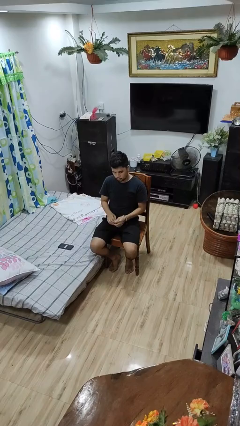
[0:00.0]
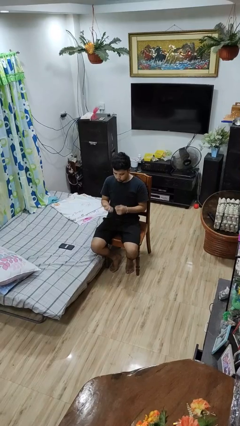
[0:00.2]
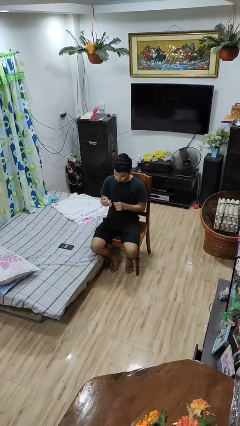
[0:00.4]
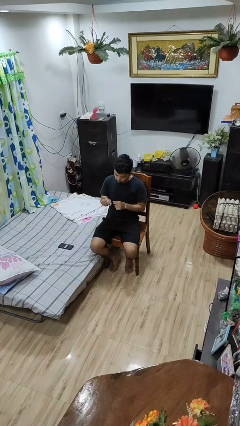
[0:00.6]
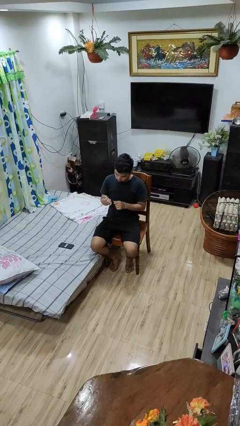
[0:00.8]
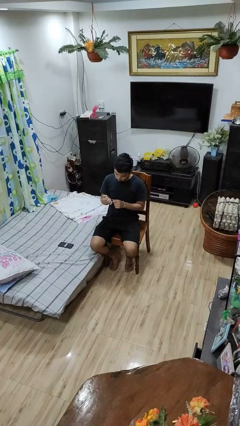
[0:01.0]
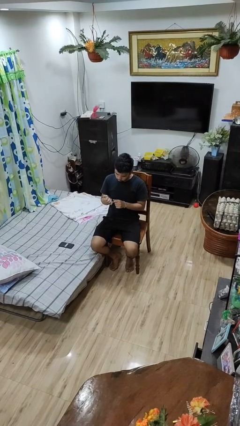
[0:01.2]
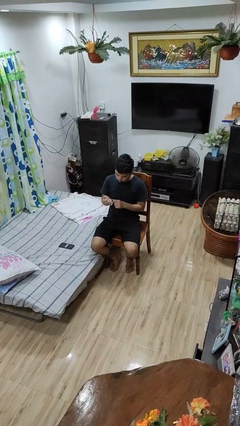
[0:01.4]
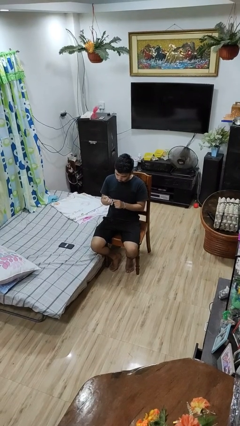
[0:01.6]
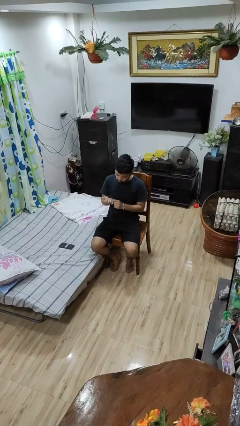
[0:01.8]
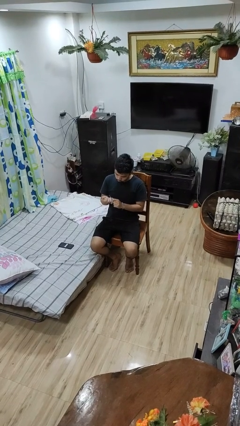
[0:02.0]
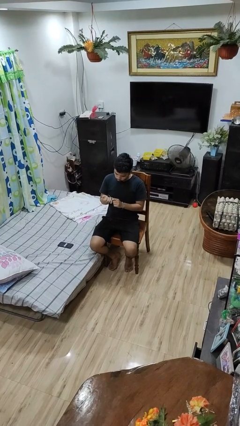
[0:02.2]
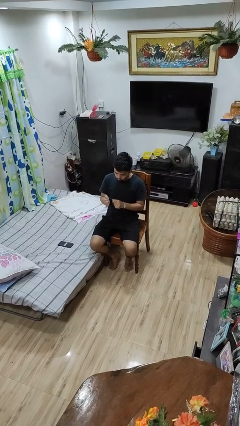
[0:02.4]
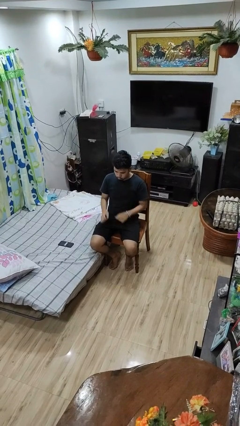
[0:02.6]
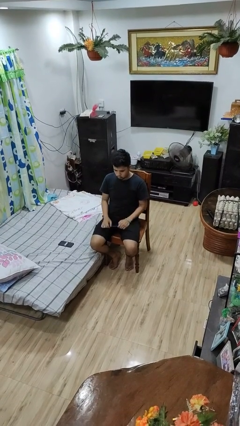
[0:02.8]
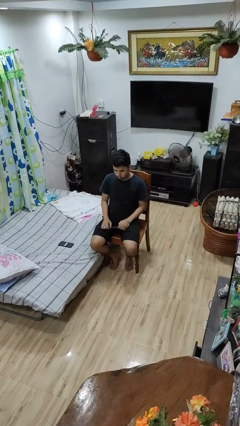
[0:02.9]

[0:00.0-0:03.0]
person files fingernails

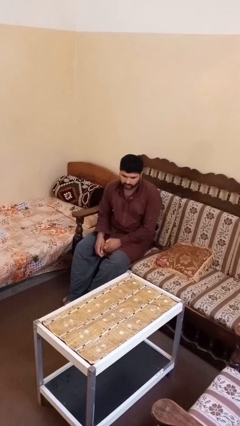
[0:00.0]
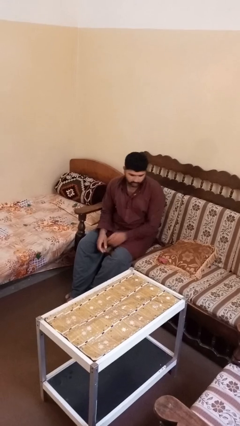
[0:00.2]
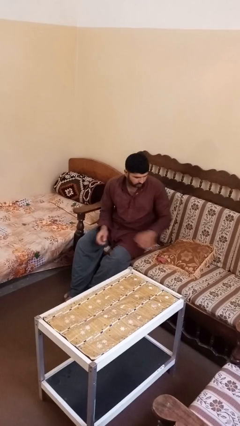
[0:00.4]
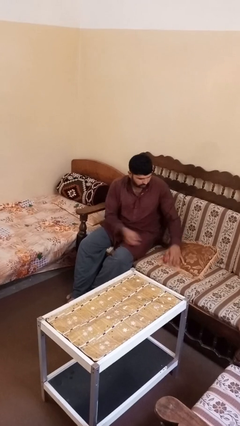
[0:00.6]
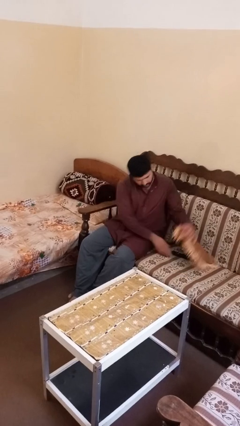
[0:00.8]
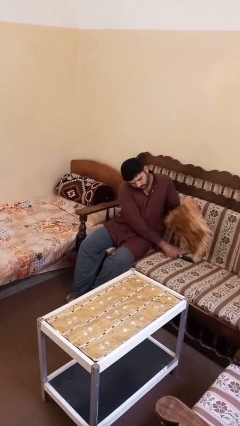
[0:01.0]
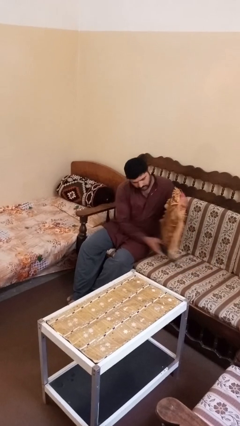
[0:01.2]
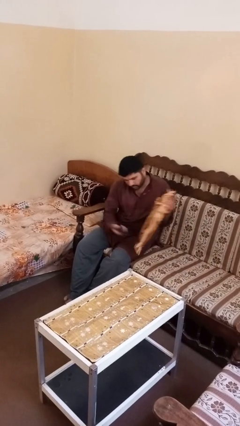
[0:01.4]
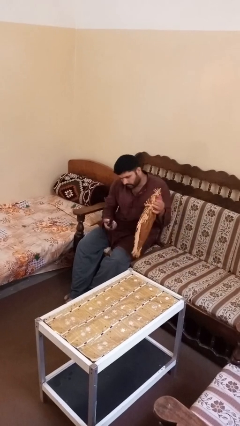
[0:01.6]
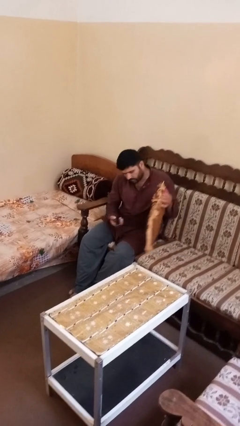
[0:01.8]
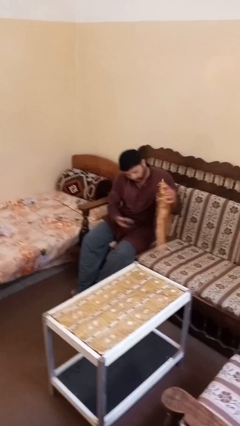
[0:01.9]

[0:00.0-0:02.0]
person searches in couch

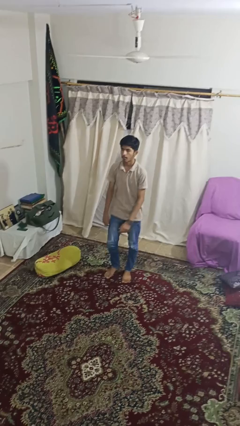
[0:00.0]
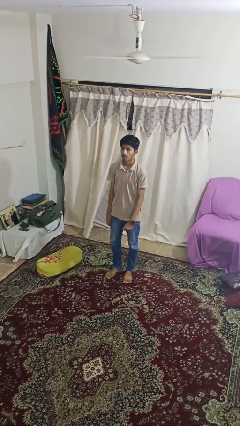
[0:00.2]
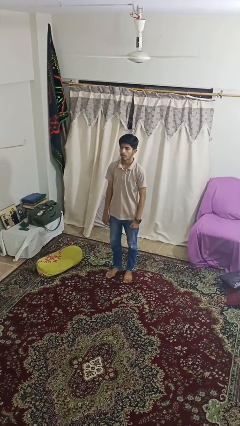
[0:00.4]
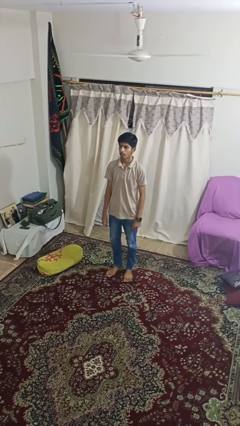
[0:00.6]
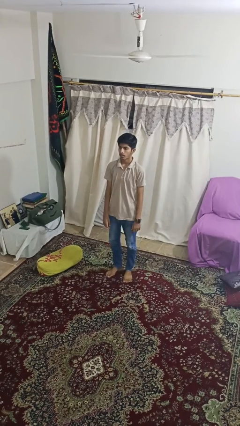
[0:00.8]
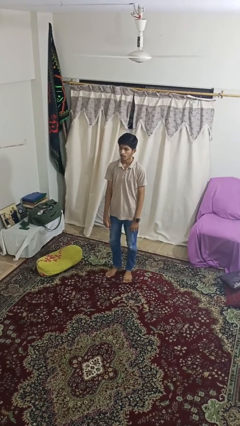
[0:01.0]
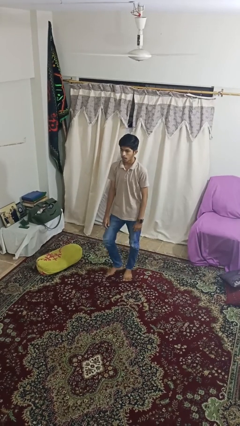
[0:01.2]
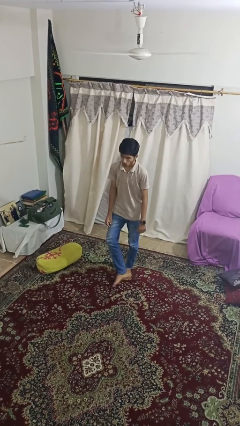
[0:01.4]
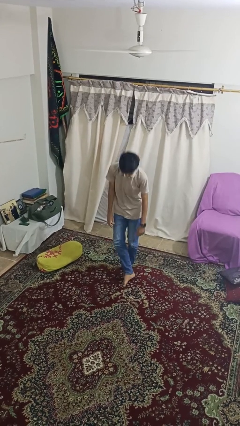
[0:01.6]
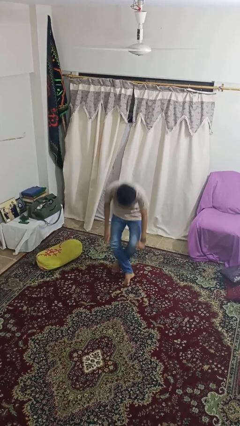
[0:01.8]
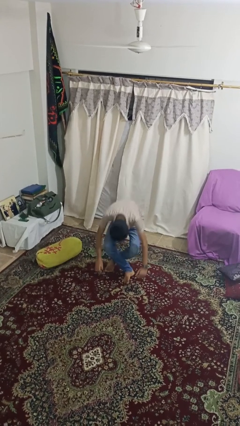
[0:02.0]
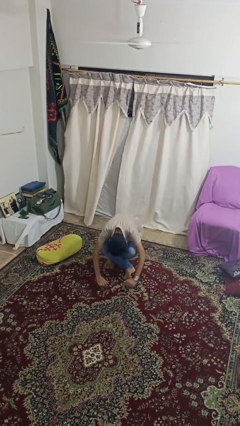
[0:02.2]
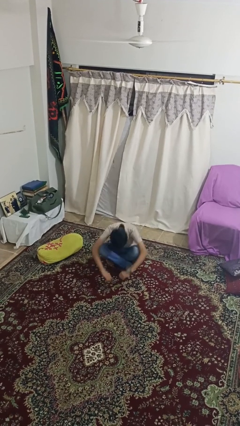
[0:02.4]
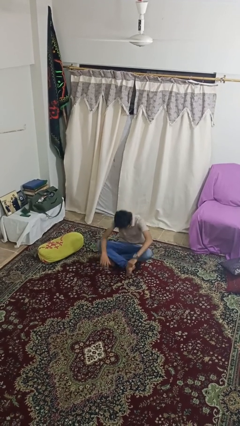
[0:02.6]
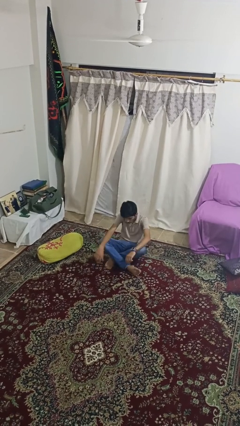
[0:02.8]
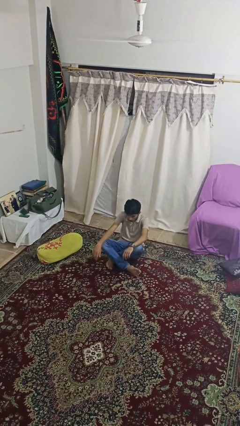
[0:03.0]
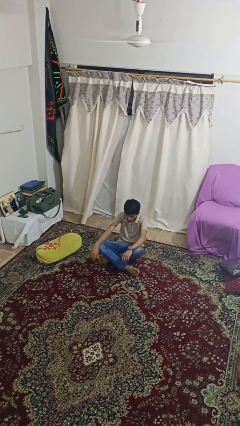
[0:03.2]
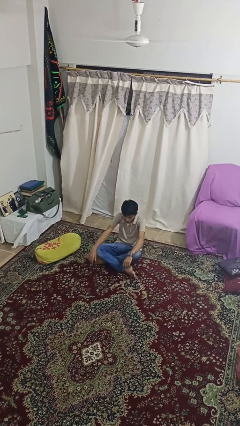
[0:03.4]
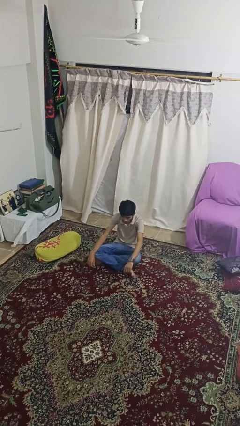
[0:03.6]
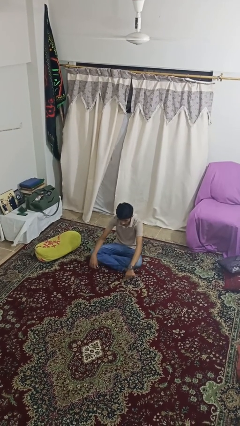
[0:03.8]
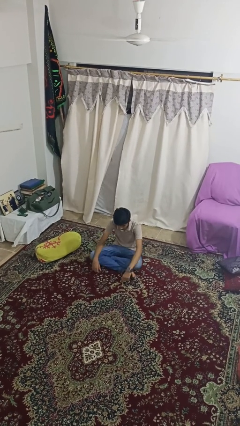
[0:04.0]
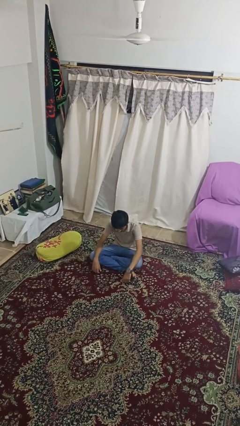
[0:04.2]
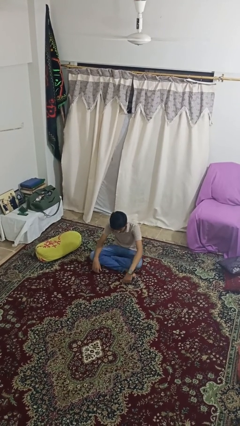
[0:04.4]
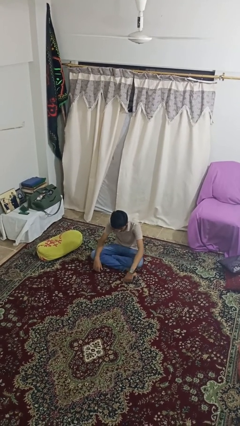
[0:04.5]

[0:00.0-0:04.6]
person sits crisscross

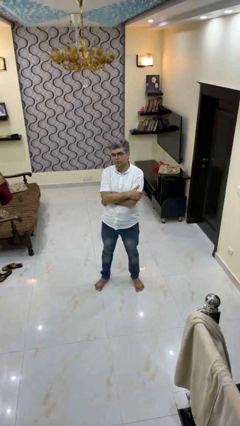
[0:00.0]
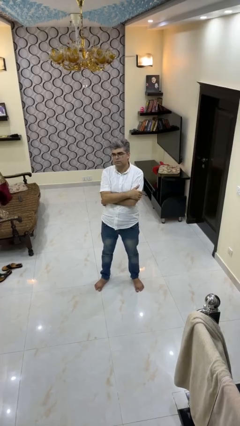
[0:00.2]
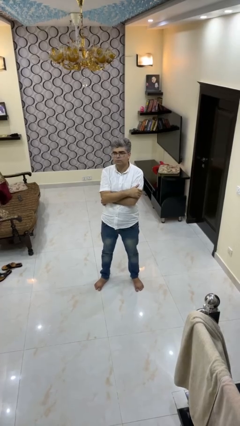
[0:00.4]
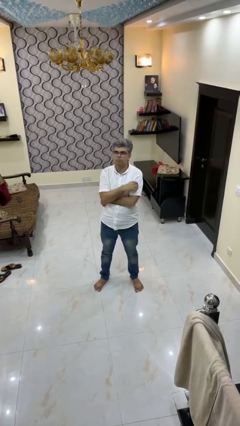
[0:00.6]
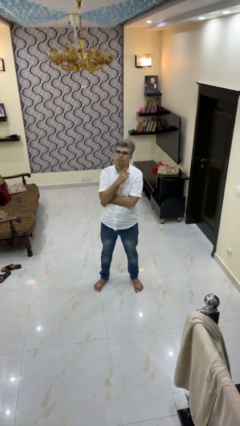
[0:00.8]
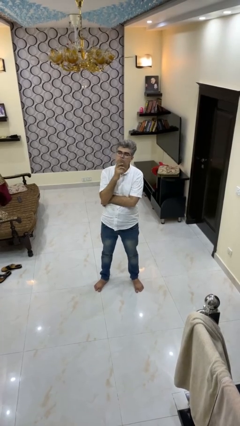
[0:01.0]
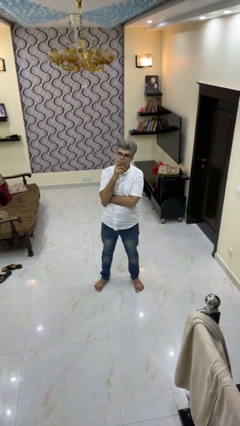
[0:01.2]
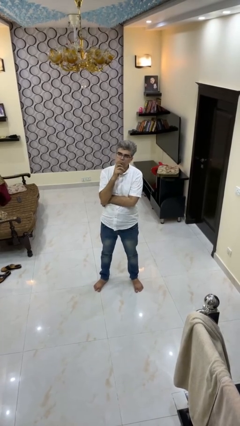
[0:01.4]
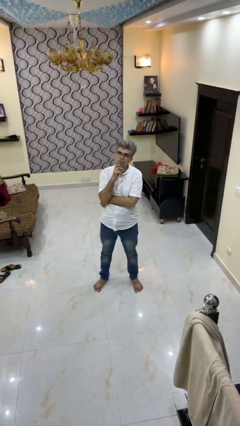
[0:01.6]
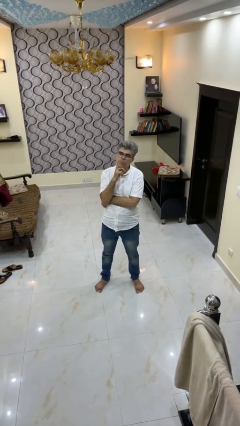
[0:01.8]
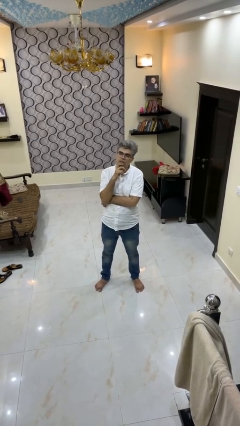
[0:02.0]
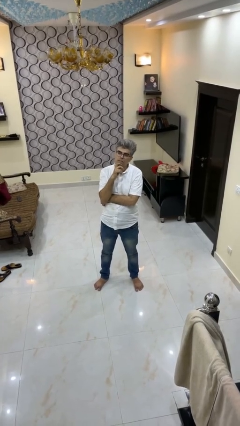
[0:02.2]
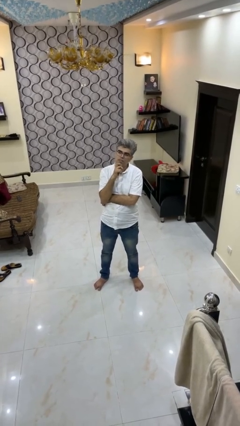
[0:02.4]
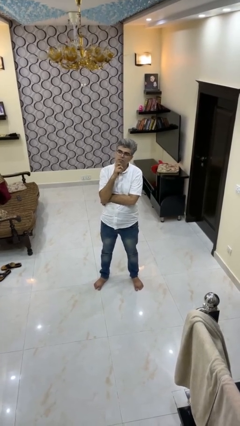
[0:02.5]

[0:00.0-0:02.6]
person strokes chin

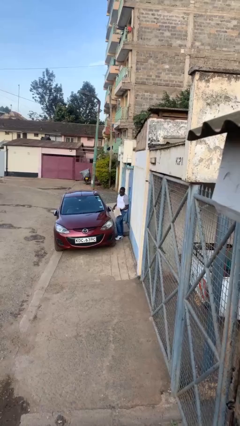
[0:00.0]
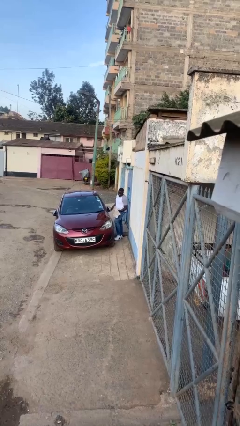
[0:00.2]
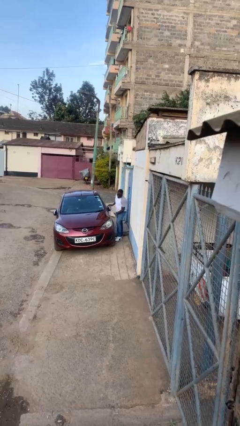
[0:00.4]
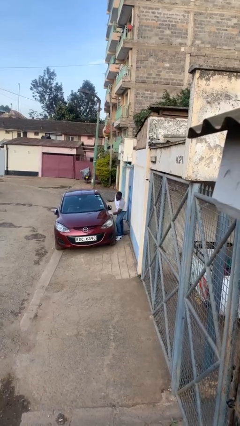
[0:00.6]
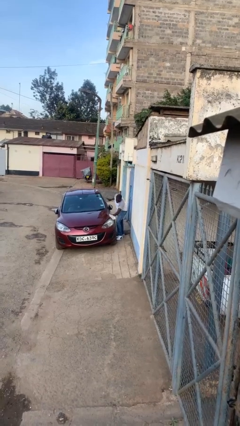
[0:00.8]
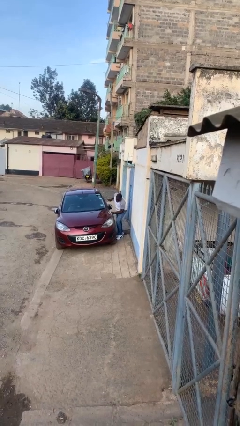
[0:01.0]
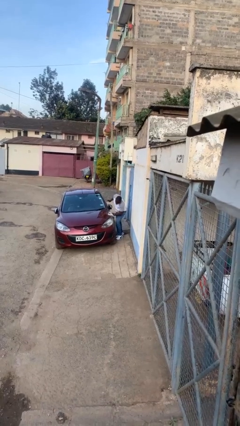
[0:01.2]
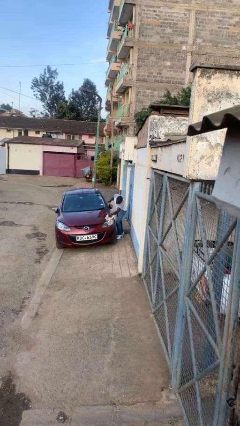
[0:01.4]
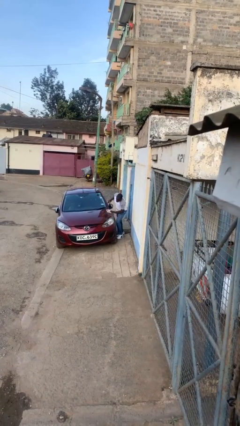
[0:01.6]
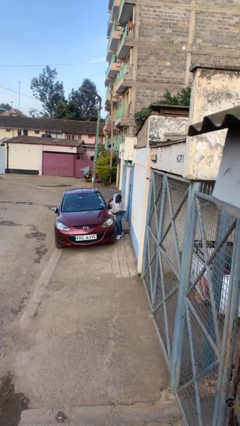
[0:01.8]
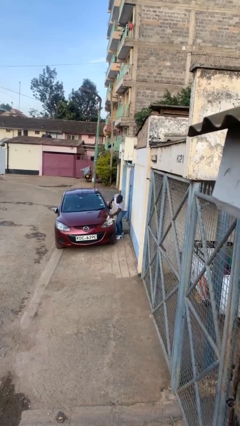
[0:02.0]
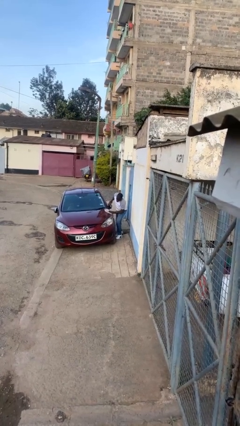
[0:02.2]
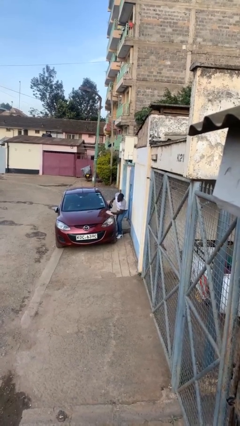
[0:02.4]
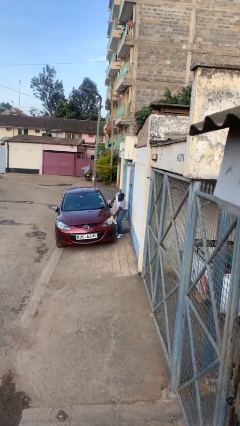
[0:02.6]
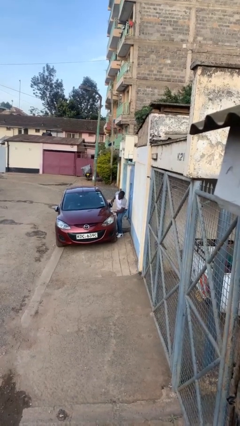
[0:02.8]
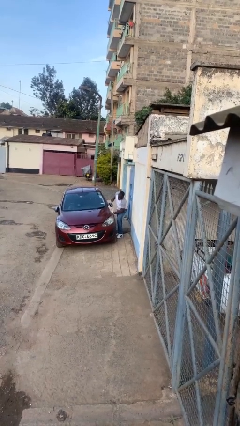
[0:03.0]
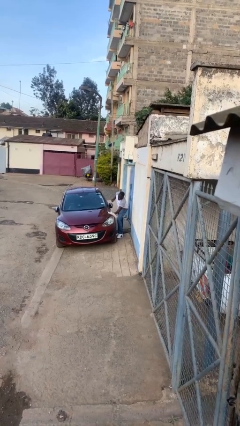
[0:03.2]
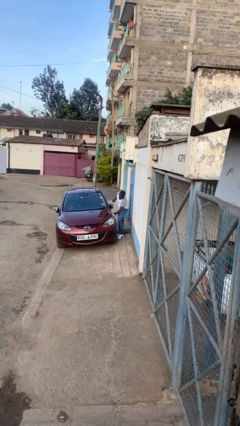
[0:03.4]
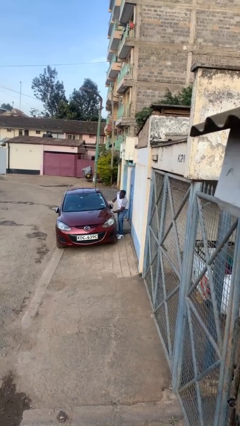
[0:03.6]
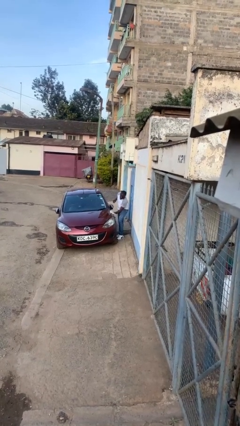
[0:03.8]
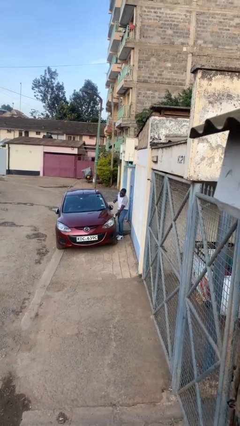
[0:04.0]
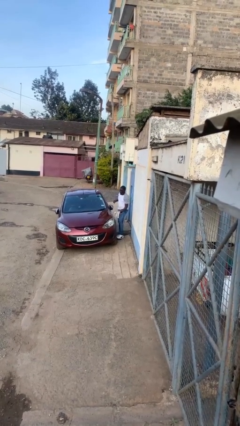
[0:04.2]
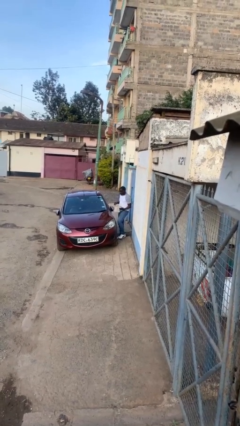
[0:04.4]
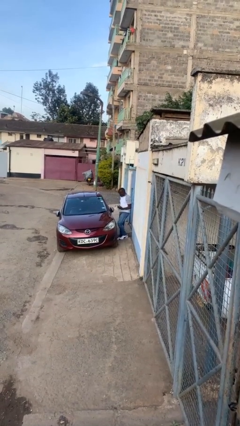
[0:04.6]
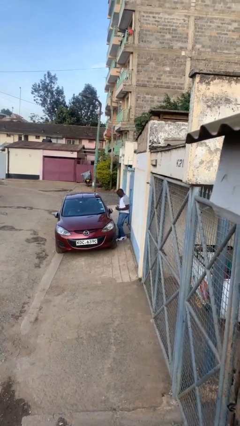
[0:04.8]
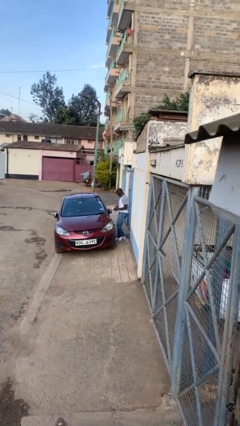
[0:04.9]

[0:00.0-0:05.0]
person polishes car with rag

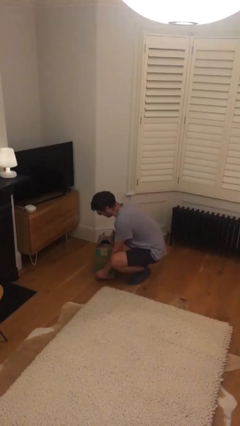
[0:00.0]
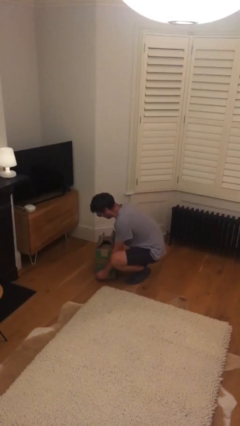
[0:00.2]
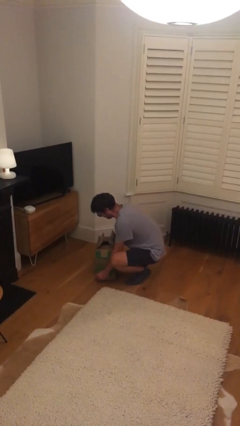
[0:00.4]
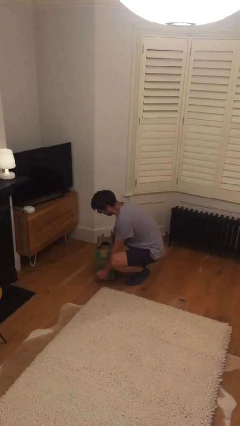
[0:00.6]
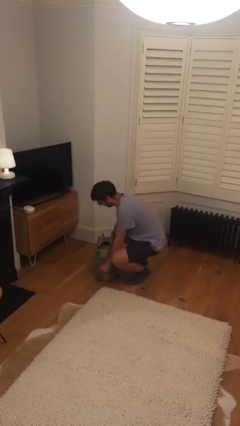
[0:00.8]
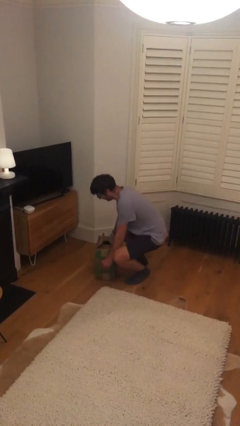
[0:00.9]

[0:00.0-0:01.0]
person puts down object on floor
